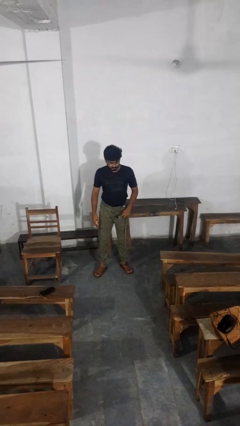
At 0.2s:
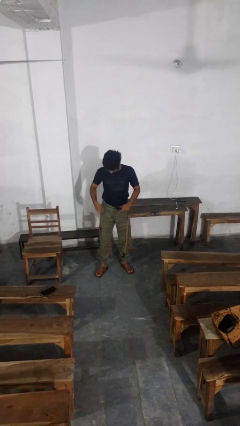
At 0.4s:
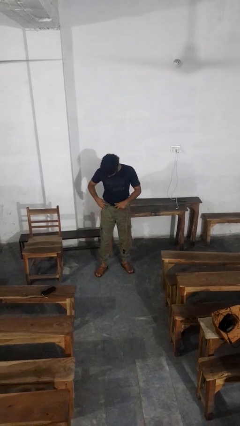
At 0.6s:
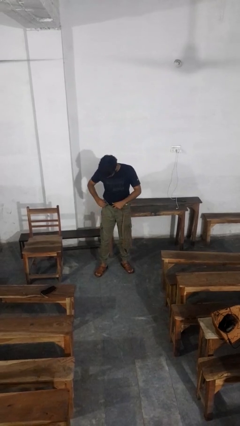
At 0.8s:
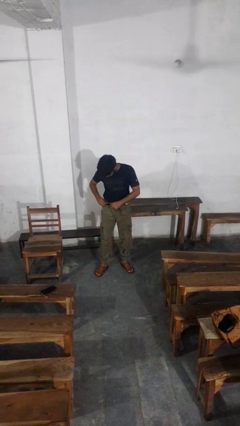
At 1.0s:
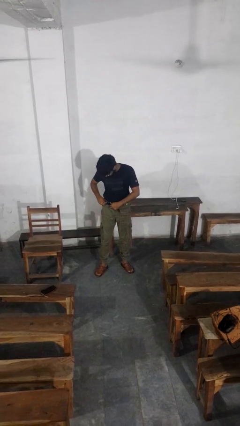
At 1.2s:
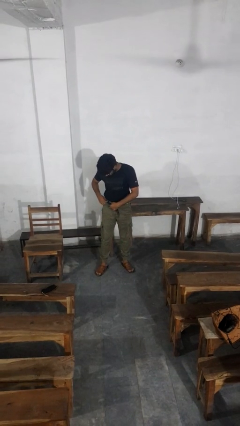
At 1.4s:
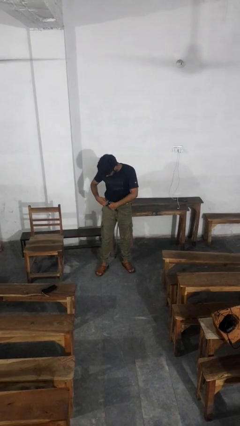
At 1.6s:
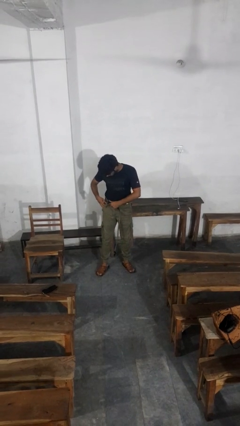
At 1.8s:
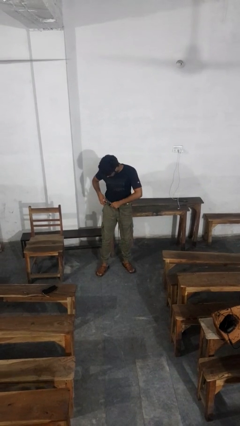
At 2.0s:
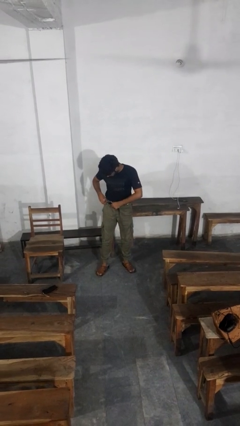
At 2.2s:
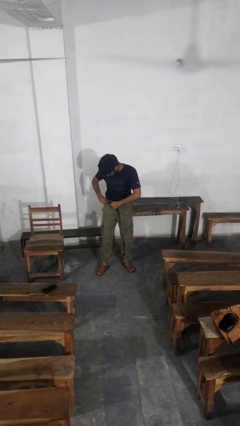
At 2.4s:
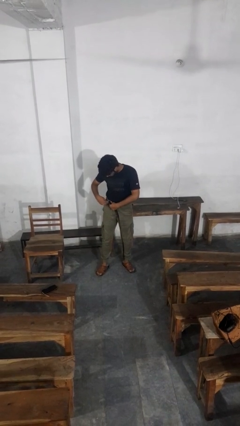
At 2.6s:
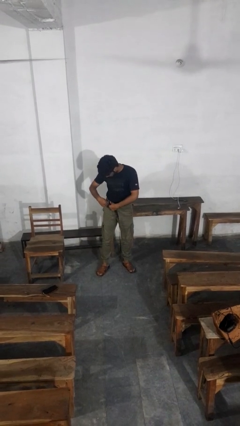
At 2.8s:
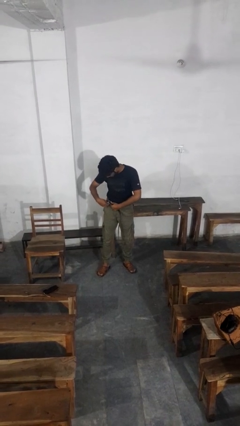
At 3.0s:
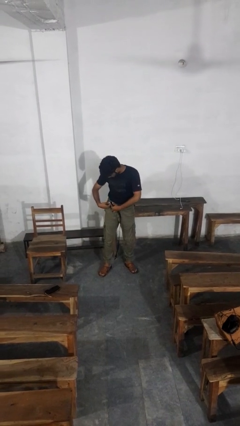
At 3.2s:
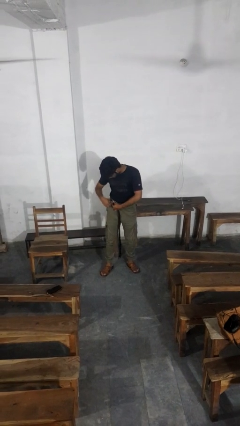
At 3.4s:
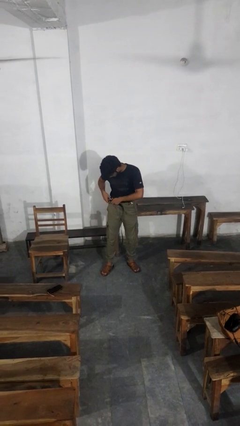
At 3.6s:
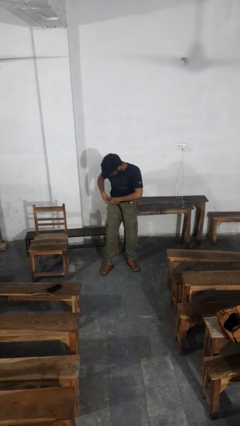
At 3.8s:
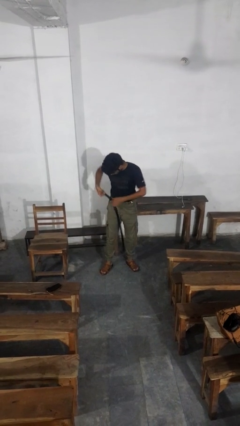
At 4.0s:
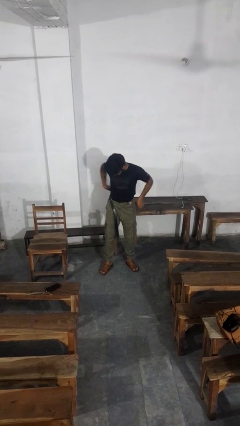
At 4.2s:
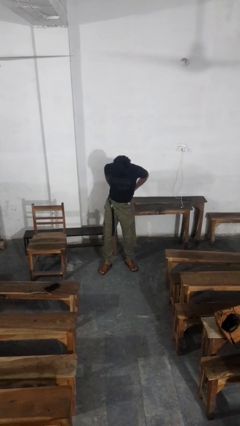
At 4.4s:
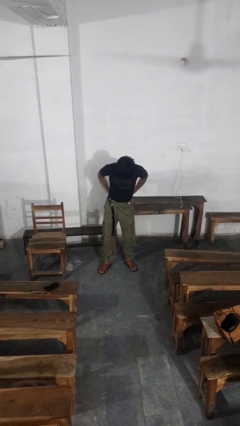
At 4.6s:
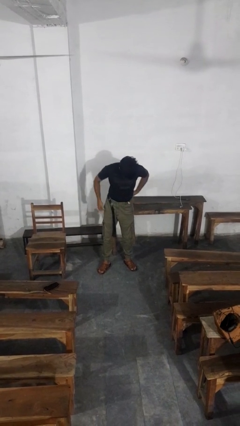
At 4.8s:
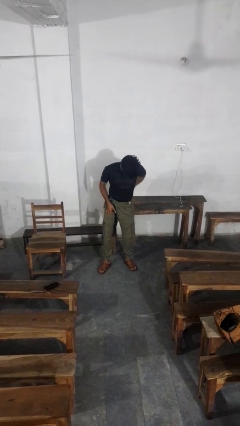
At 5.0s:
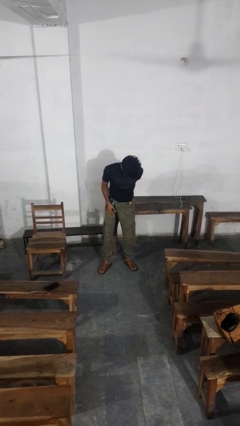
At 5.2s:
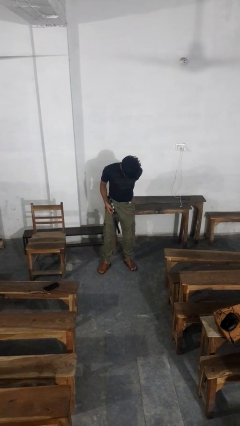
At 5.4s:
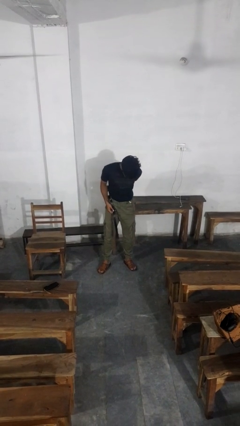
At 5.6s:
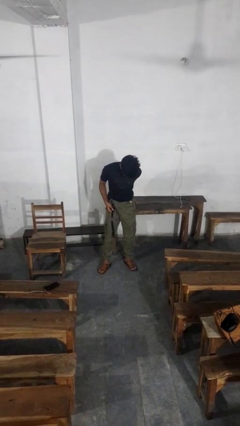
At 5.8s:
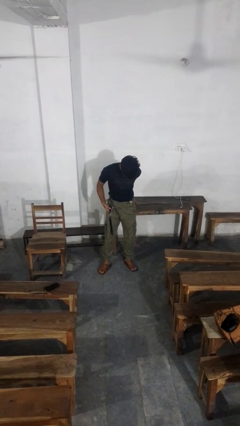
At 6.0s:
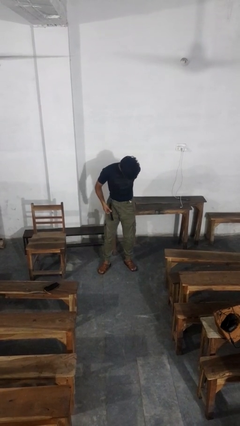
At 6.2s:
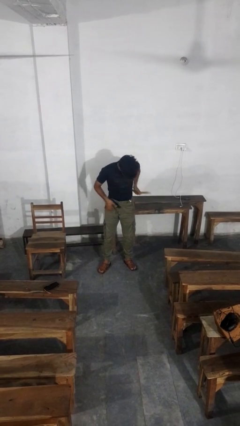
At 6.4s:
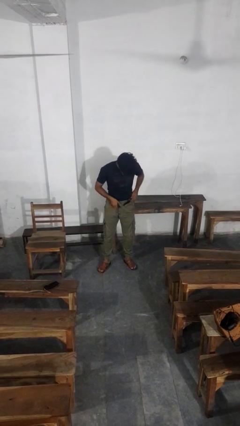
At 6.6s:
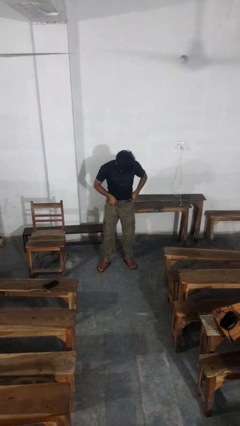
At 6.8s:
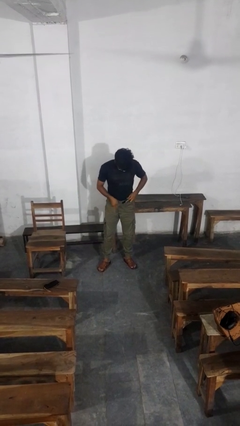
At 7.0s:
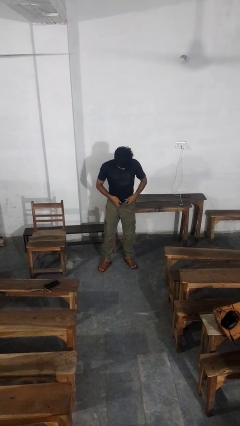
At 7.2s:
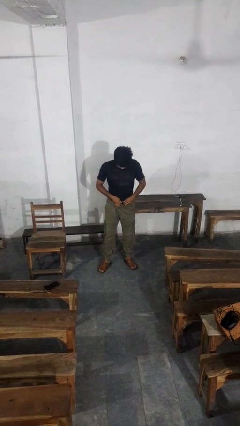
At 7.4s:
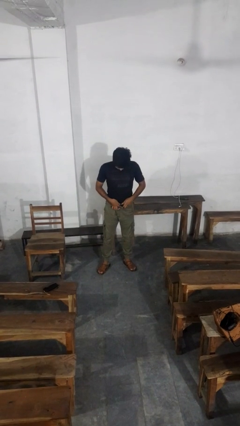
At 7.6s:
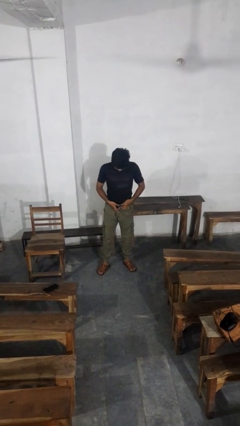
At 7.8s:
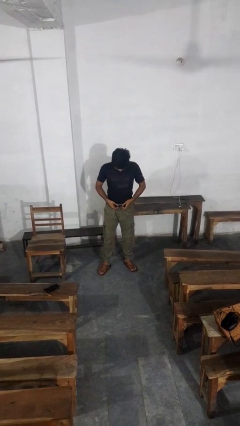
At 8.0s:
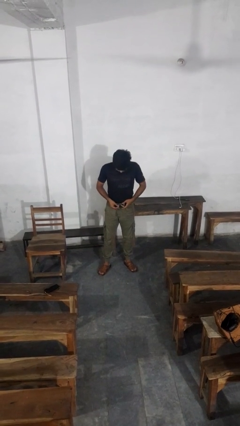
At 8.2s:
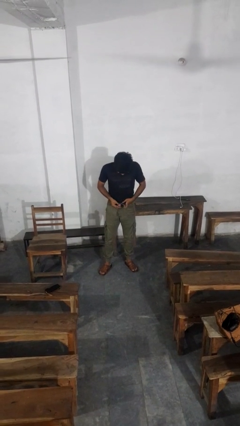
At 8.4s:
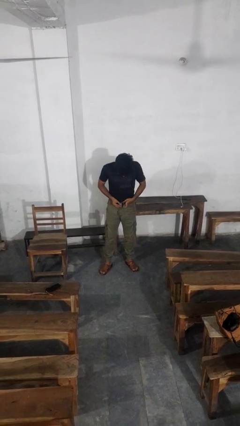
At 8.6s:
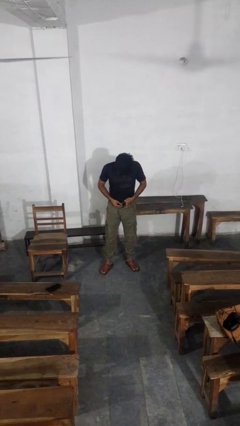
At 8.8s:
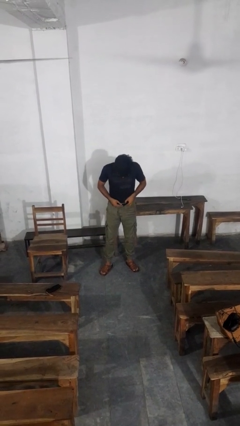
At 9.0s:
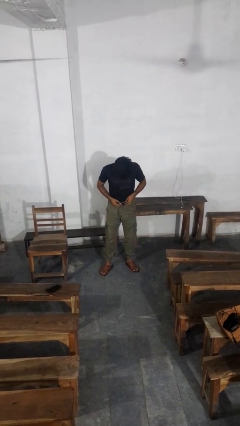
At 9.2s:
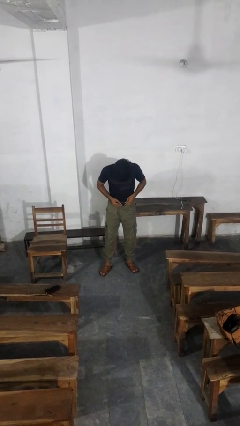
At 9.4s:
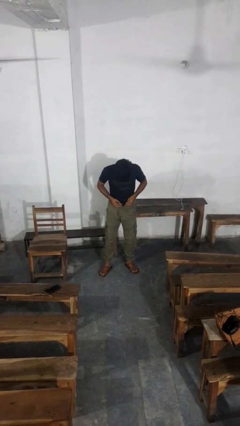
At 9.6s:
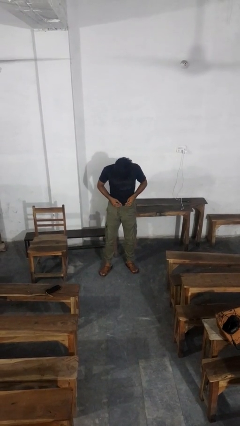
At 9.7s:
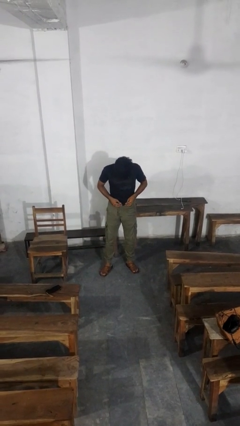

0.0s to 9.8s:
person puts on belt

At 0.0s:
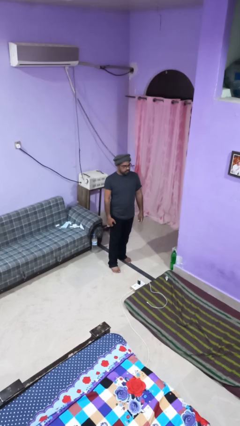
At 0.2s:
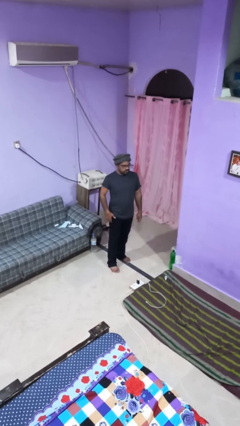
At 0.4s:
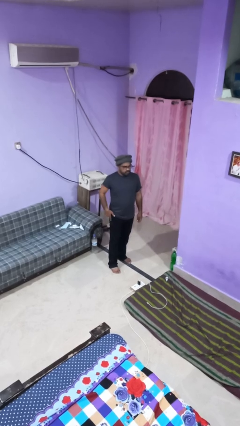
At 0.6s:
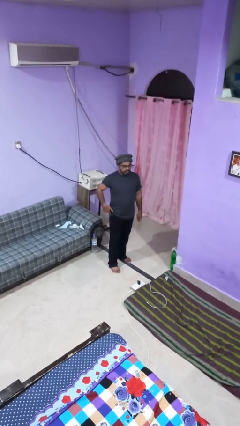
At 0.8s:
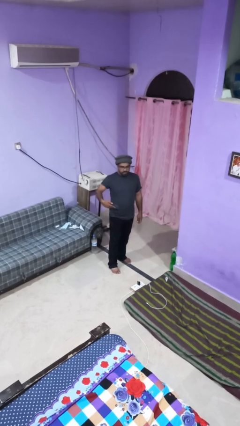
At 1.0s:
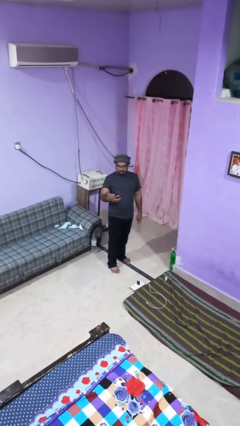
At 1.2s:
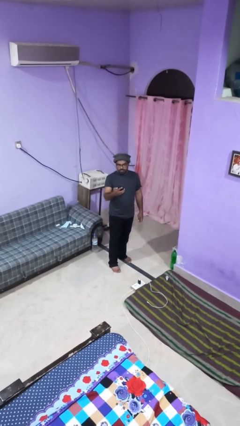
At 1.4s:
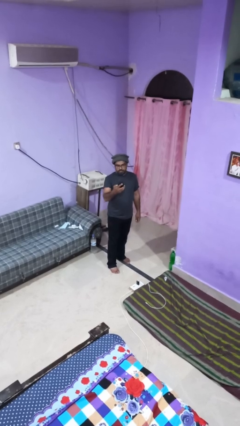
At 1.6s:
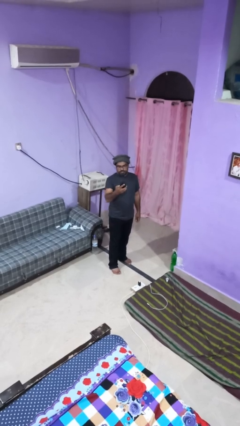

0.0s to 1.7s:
person takes phone from pocket

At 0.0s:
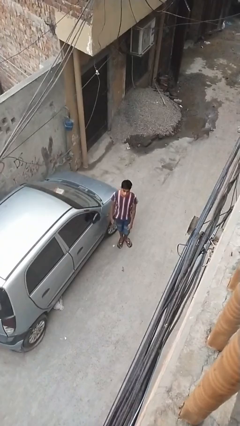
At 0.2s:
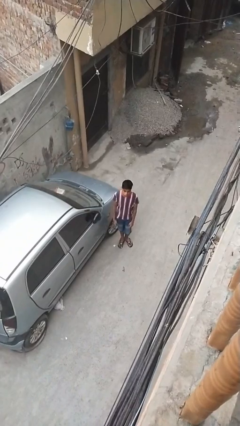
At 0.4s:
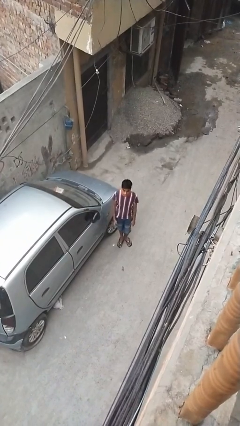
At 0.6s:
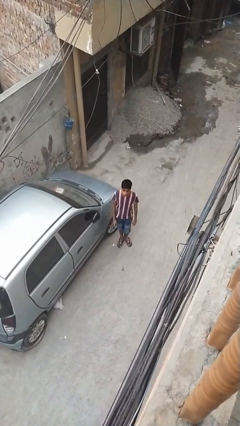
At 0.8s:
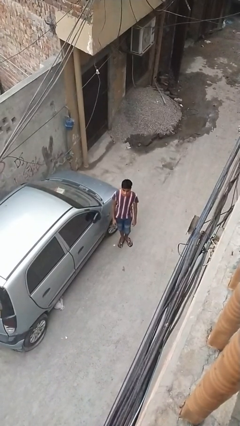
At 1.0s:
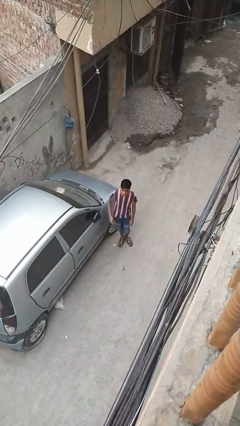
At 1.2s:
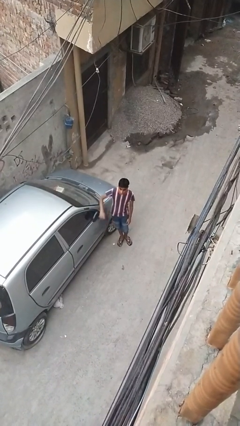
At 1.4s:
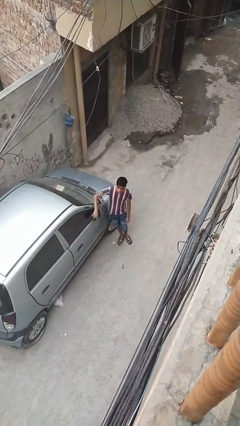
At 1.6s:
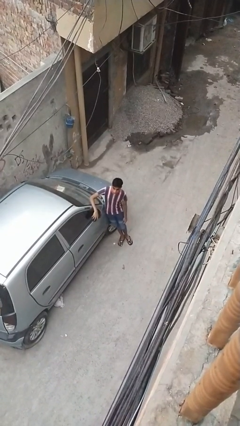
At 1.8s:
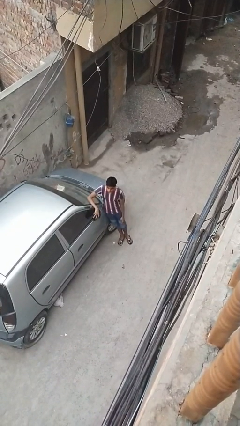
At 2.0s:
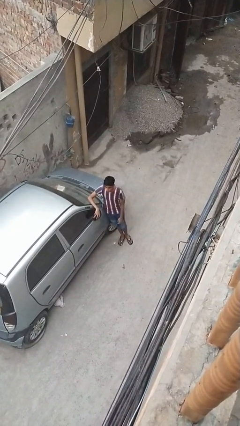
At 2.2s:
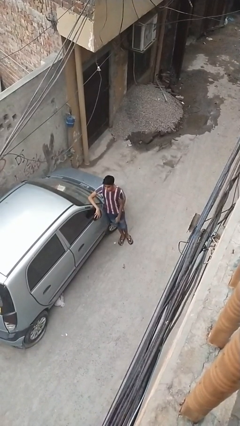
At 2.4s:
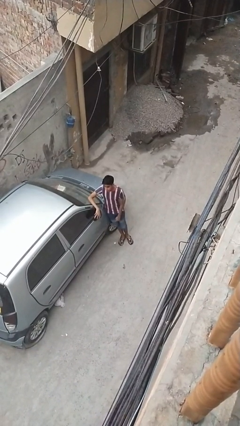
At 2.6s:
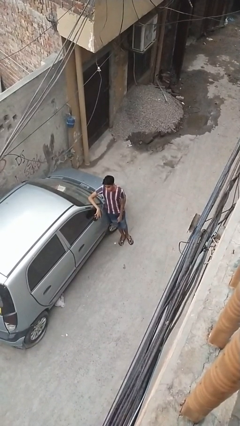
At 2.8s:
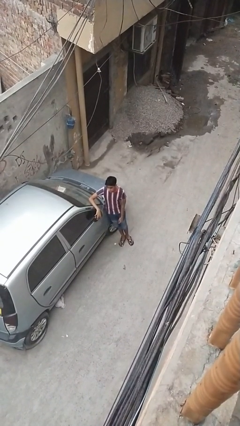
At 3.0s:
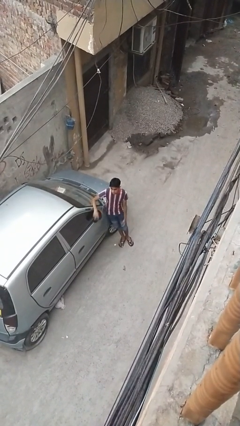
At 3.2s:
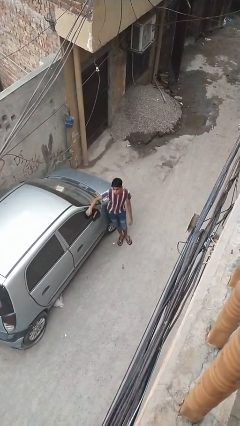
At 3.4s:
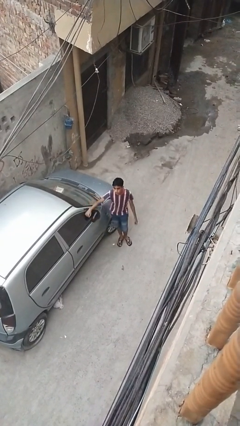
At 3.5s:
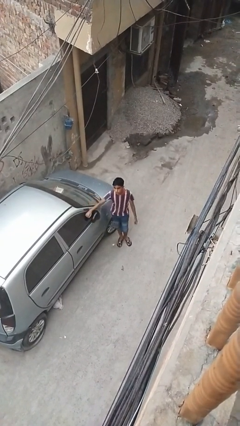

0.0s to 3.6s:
person leans against car

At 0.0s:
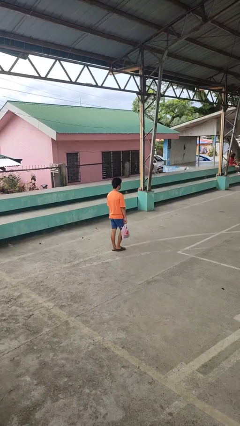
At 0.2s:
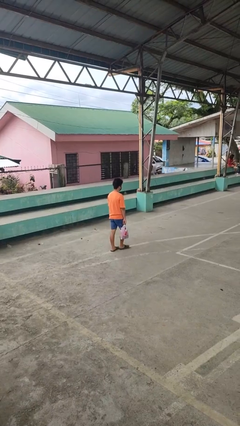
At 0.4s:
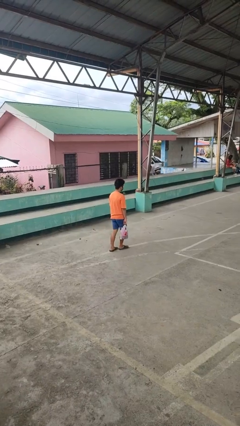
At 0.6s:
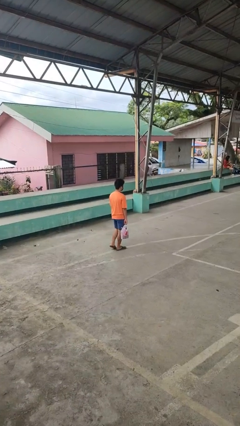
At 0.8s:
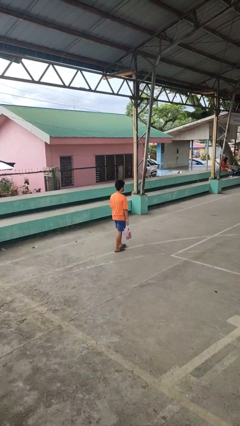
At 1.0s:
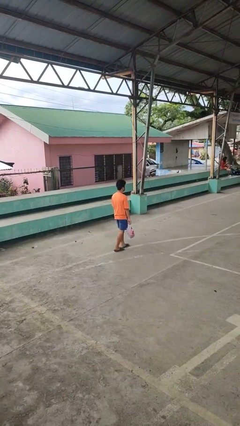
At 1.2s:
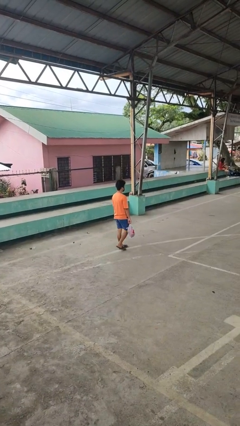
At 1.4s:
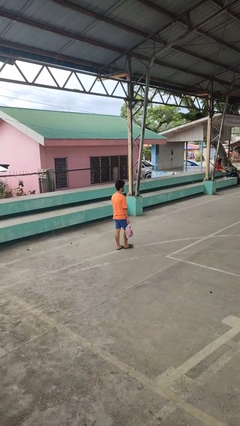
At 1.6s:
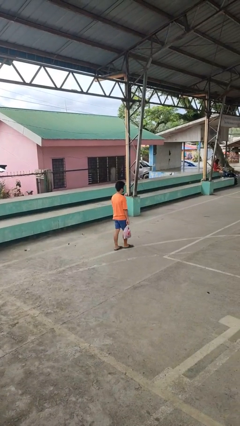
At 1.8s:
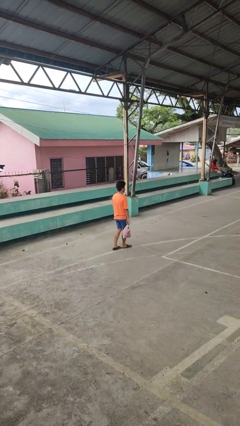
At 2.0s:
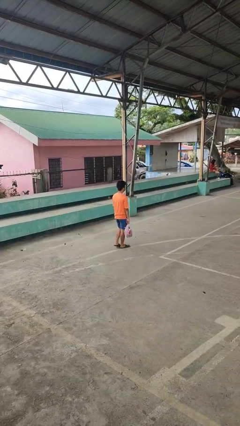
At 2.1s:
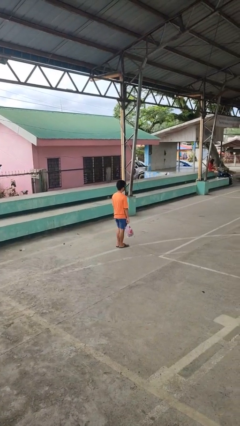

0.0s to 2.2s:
person carries groceries
